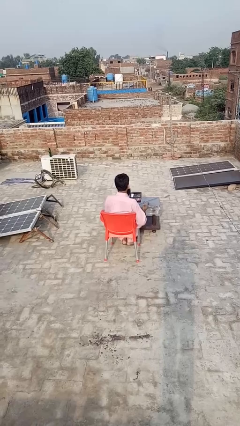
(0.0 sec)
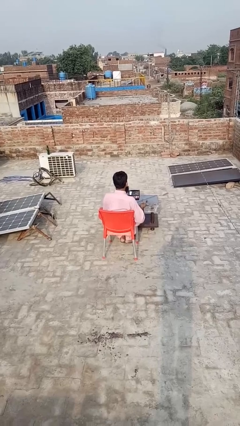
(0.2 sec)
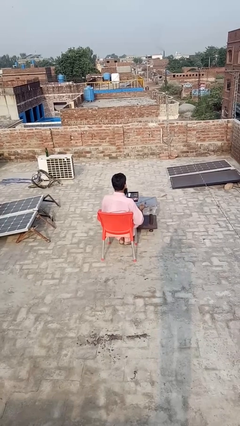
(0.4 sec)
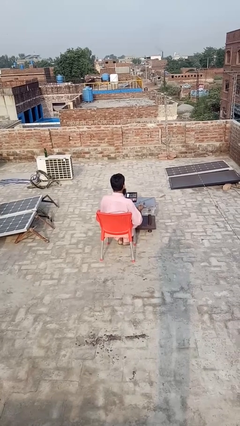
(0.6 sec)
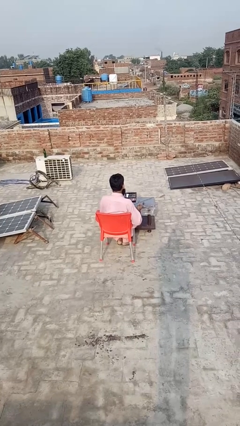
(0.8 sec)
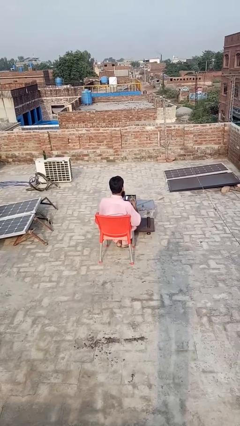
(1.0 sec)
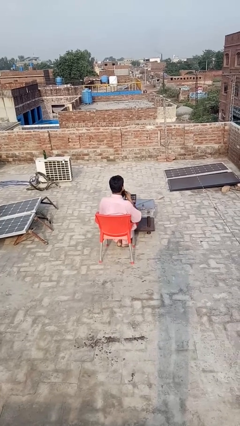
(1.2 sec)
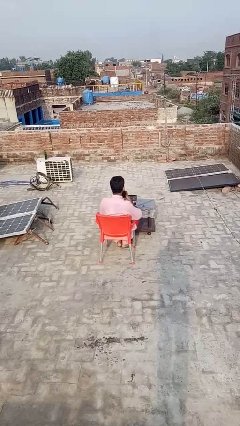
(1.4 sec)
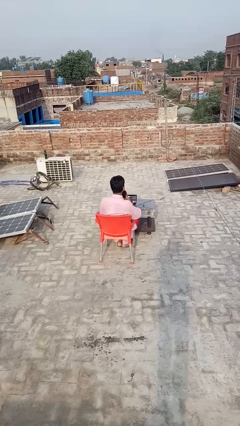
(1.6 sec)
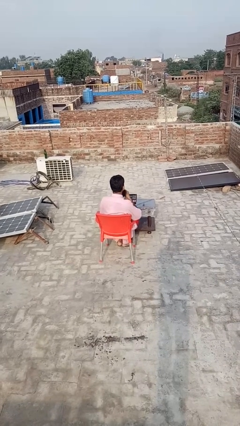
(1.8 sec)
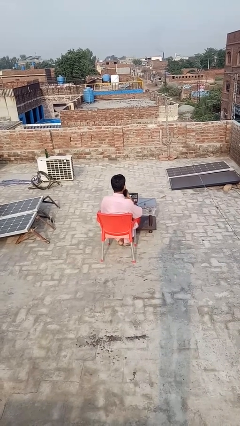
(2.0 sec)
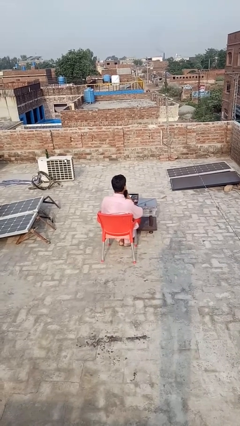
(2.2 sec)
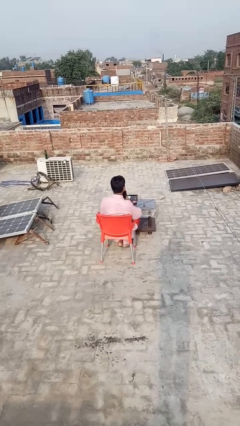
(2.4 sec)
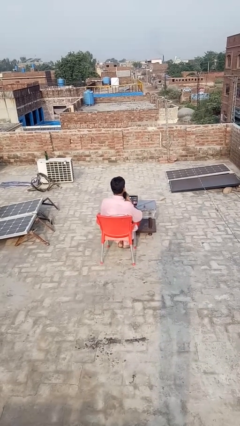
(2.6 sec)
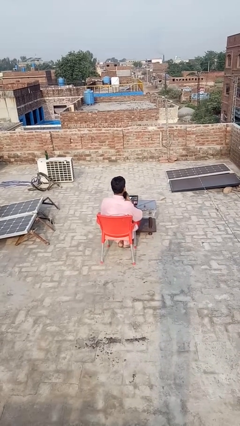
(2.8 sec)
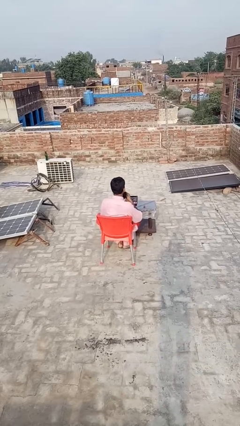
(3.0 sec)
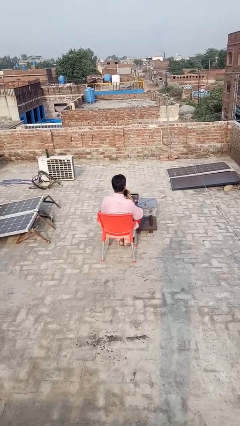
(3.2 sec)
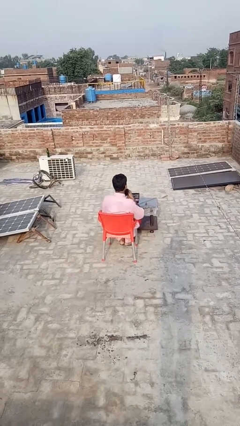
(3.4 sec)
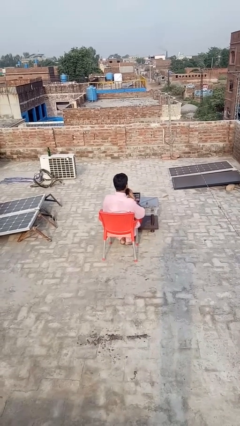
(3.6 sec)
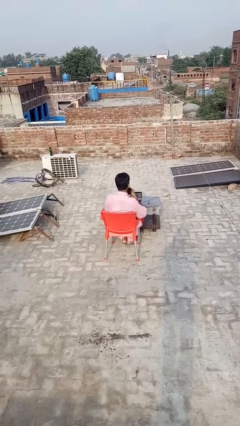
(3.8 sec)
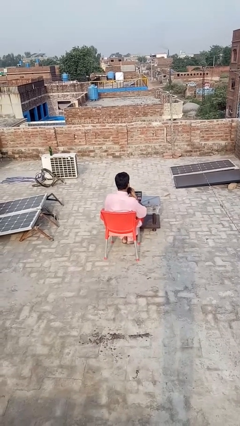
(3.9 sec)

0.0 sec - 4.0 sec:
person applies lip makeup

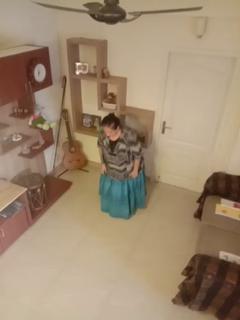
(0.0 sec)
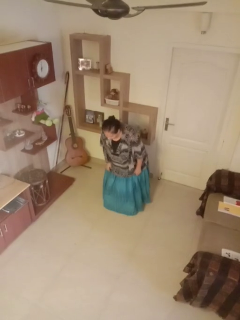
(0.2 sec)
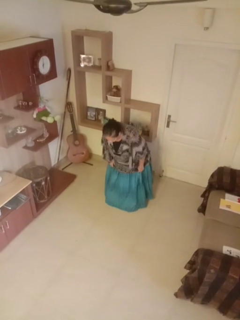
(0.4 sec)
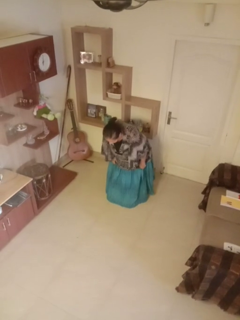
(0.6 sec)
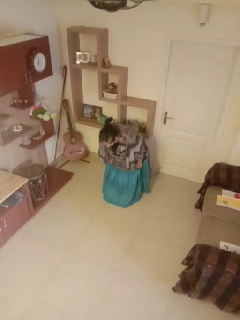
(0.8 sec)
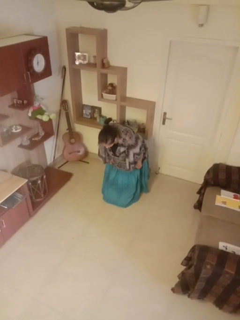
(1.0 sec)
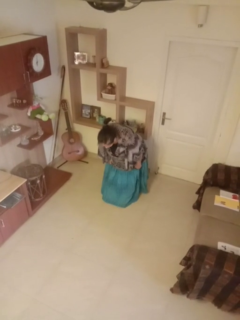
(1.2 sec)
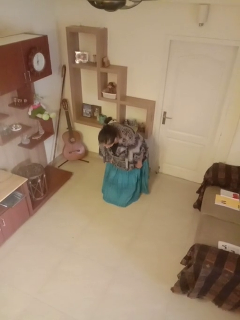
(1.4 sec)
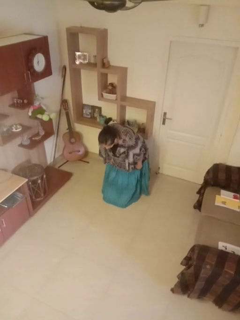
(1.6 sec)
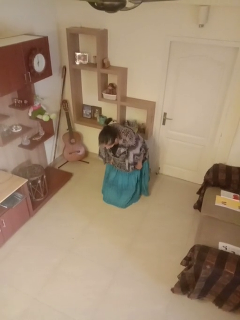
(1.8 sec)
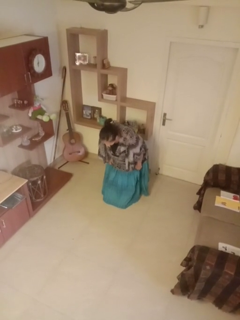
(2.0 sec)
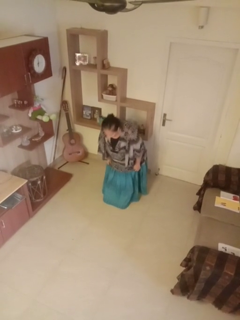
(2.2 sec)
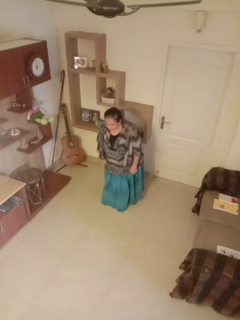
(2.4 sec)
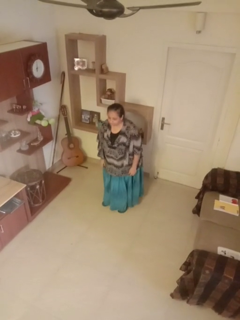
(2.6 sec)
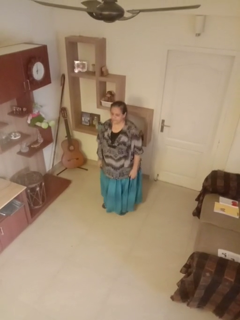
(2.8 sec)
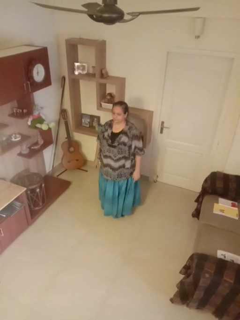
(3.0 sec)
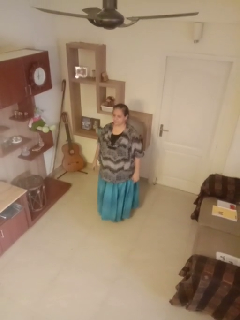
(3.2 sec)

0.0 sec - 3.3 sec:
person bows

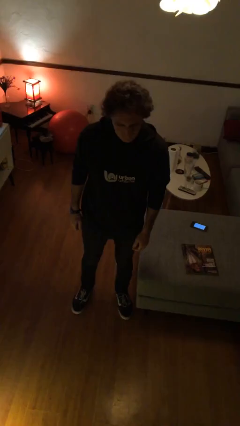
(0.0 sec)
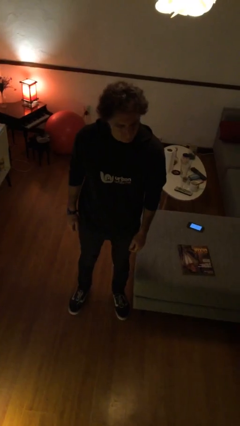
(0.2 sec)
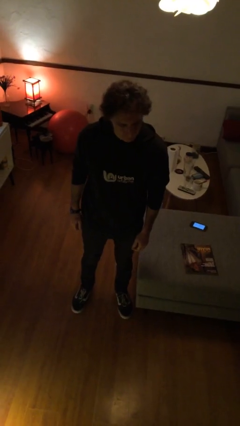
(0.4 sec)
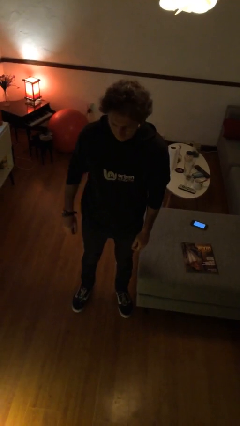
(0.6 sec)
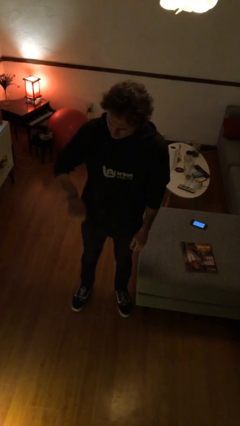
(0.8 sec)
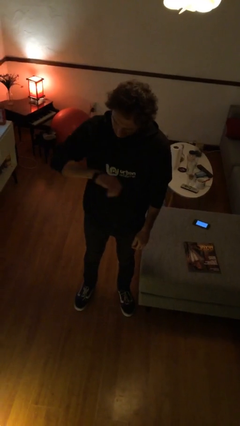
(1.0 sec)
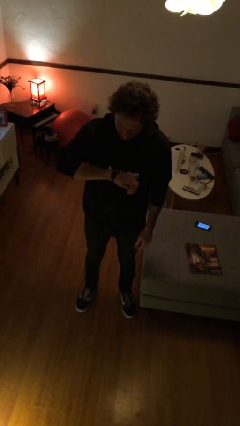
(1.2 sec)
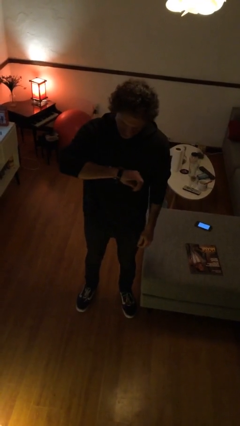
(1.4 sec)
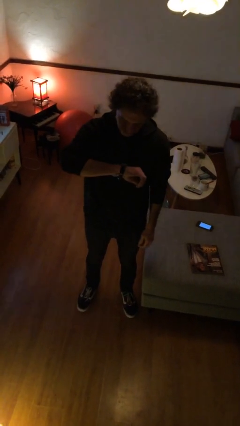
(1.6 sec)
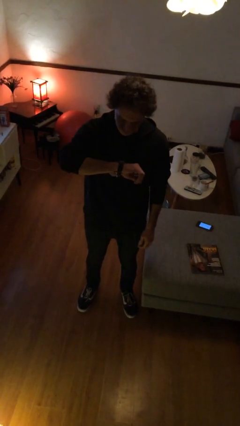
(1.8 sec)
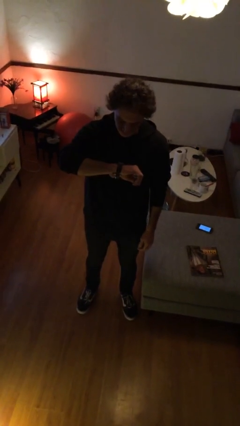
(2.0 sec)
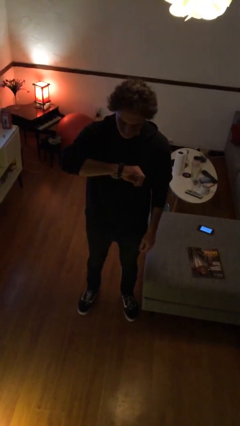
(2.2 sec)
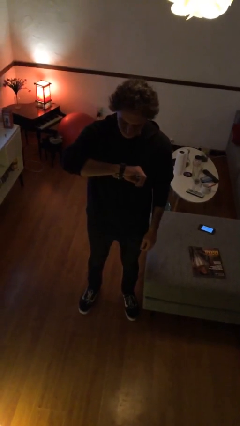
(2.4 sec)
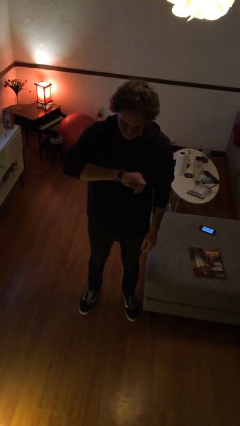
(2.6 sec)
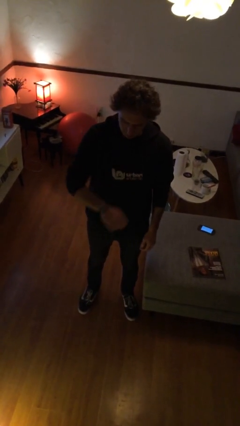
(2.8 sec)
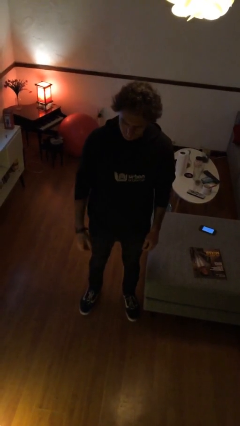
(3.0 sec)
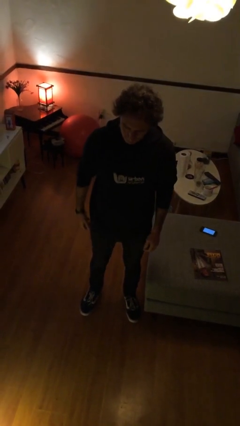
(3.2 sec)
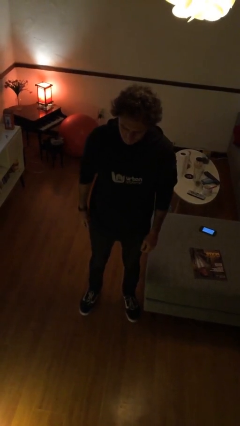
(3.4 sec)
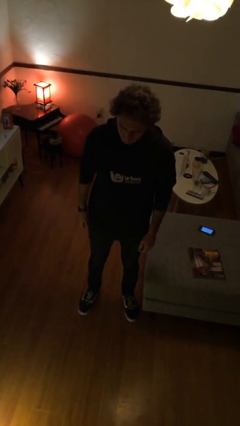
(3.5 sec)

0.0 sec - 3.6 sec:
person looks at wristwatch

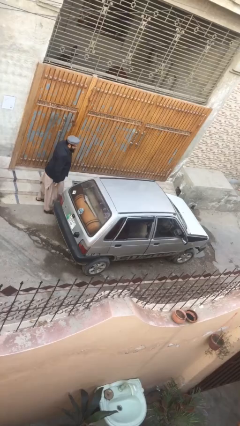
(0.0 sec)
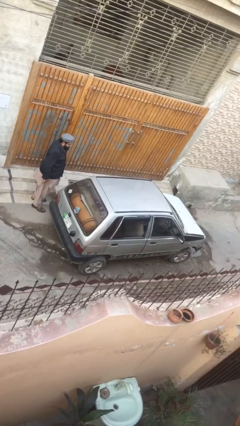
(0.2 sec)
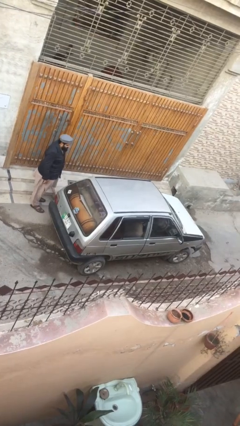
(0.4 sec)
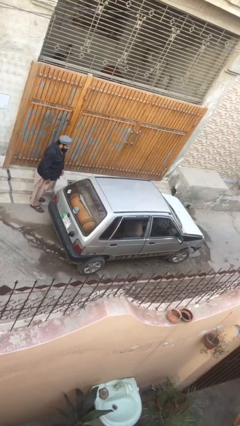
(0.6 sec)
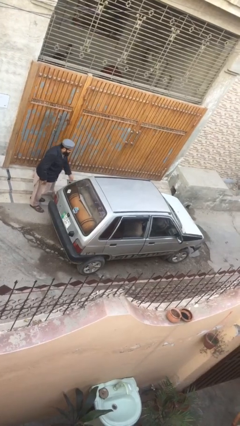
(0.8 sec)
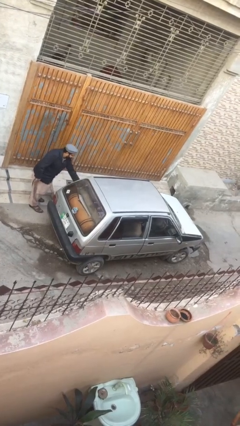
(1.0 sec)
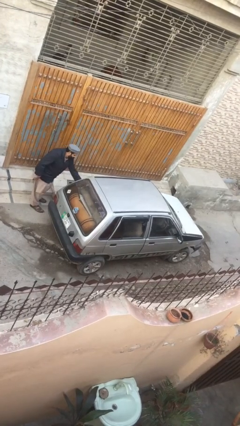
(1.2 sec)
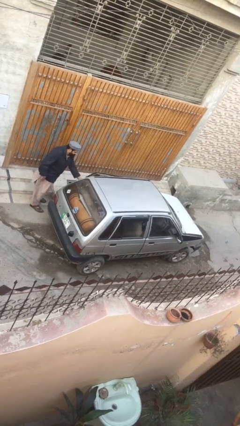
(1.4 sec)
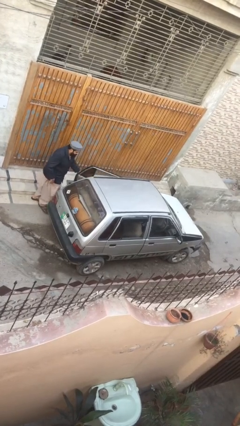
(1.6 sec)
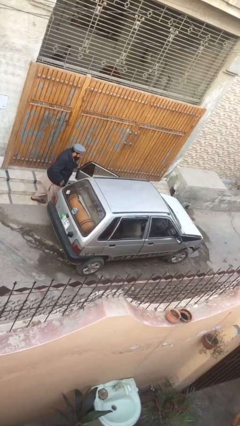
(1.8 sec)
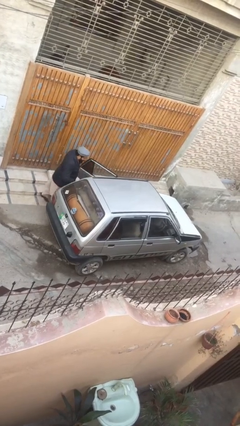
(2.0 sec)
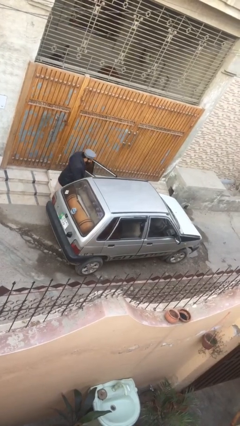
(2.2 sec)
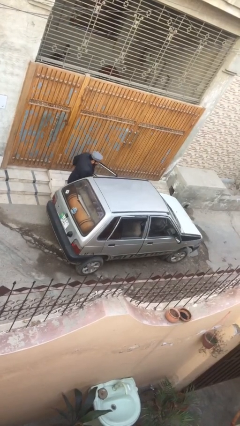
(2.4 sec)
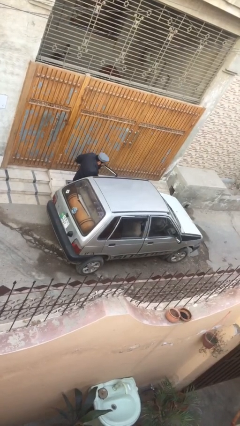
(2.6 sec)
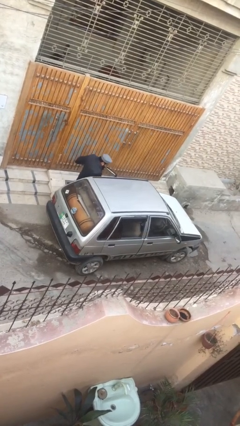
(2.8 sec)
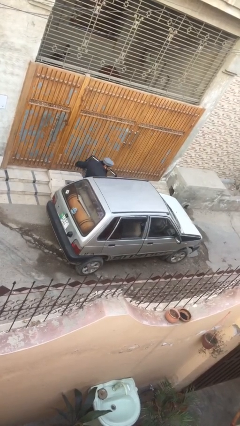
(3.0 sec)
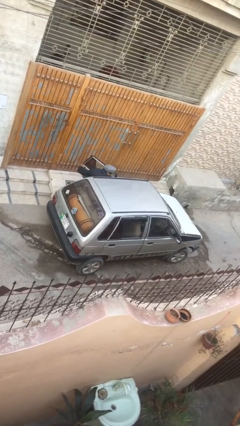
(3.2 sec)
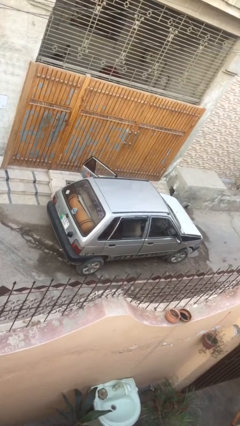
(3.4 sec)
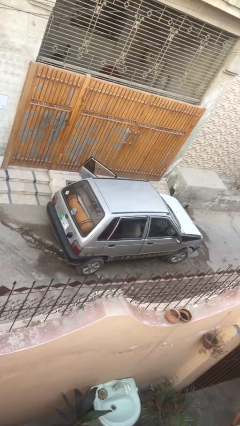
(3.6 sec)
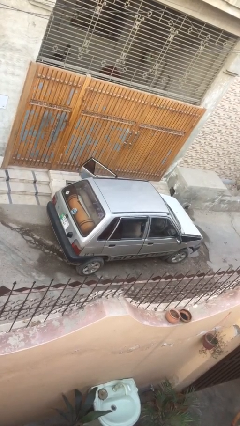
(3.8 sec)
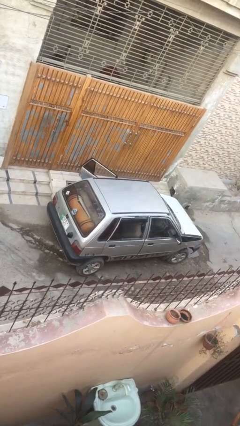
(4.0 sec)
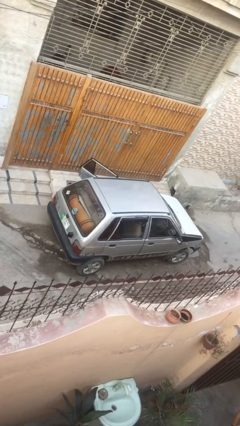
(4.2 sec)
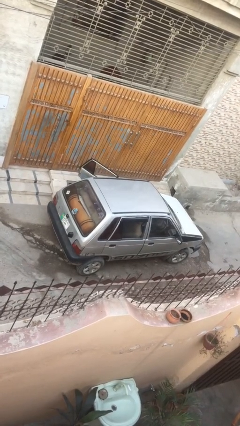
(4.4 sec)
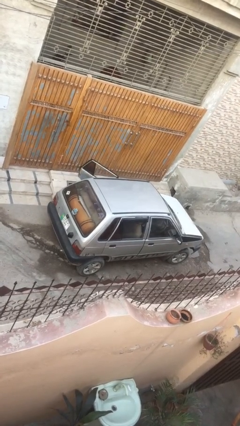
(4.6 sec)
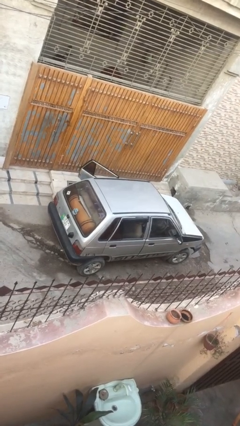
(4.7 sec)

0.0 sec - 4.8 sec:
car picks up person

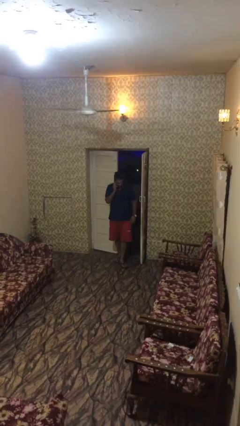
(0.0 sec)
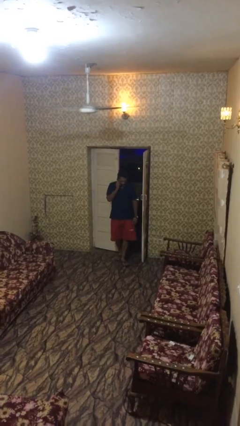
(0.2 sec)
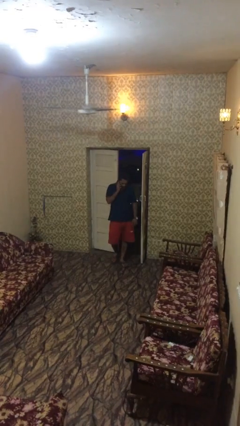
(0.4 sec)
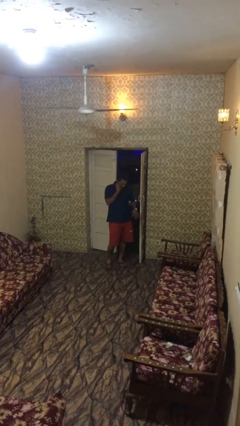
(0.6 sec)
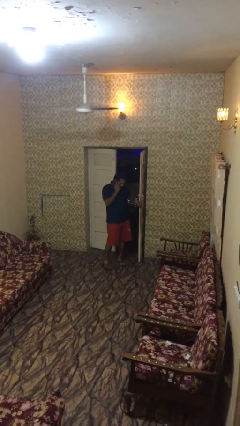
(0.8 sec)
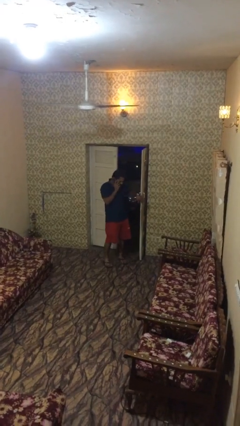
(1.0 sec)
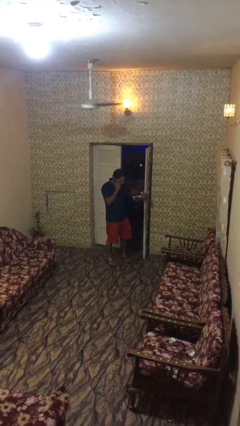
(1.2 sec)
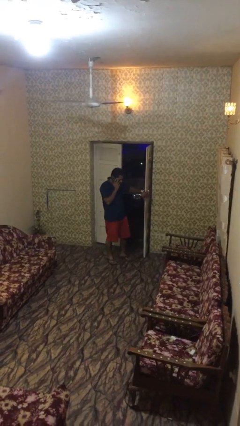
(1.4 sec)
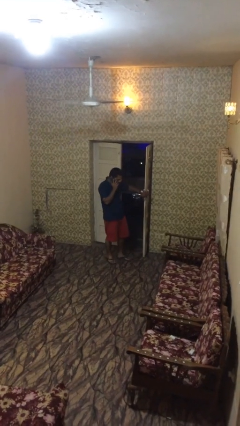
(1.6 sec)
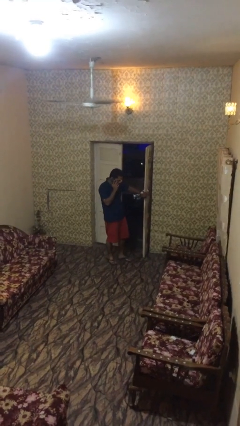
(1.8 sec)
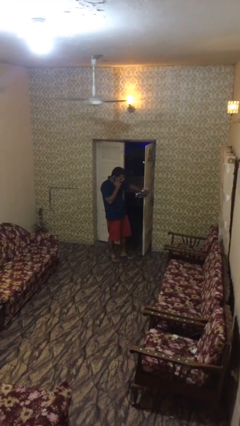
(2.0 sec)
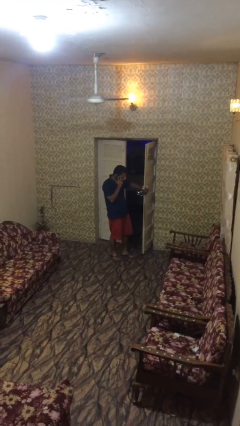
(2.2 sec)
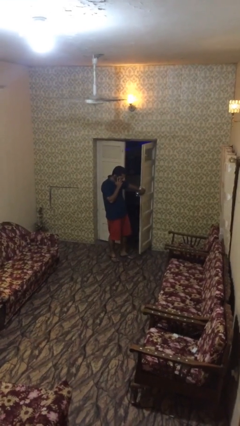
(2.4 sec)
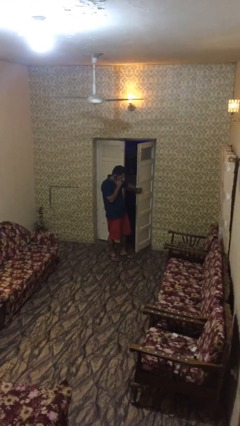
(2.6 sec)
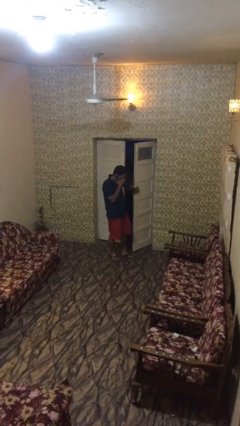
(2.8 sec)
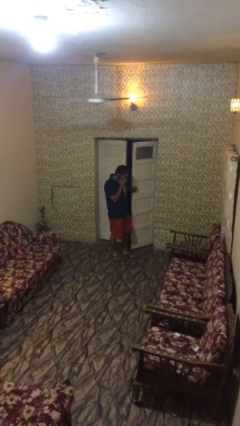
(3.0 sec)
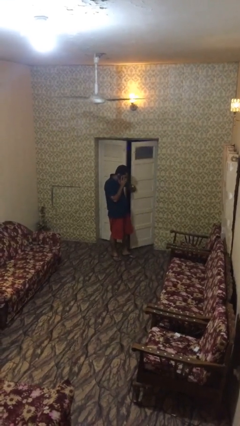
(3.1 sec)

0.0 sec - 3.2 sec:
person enters scene through structure
